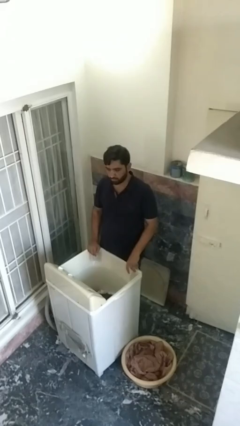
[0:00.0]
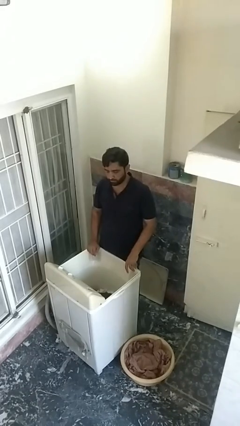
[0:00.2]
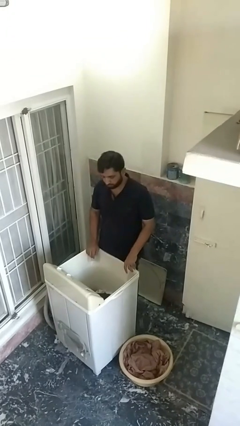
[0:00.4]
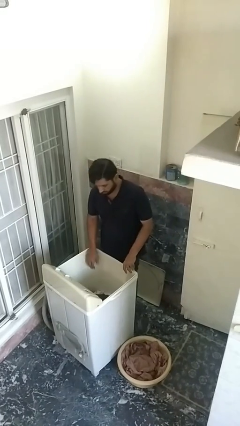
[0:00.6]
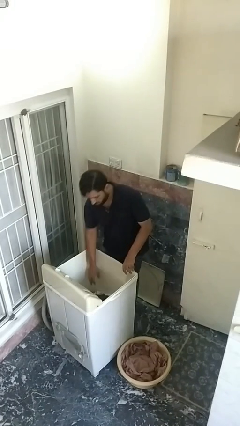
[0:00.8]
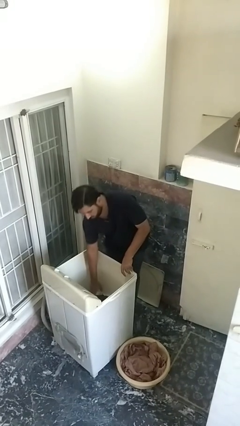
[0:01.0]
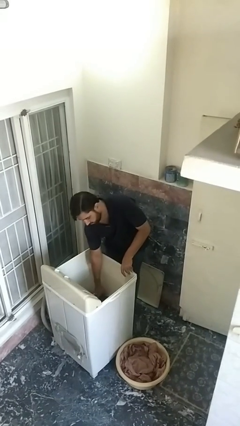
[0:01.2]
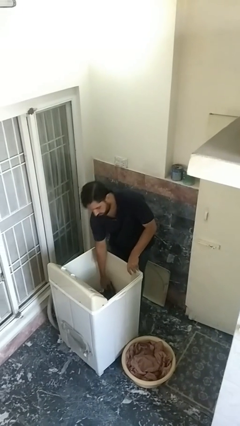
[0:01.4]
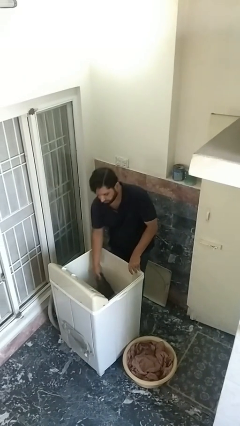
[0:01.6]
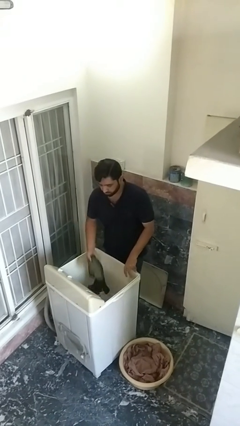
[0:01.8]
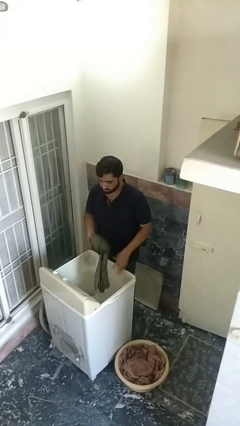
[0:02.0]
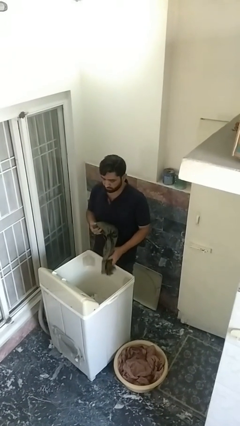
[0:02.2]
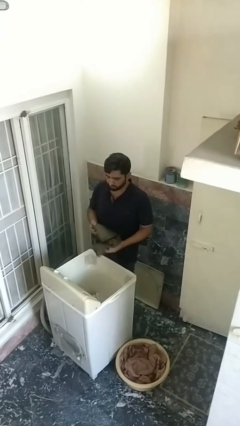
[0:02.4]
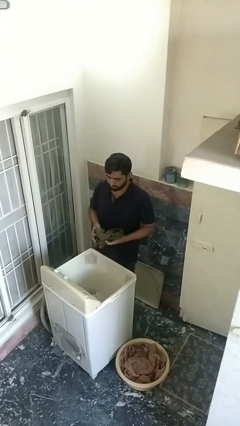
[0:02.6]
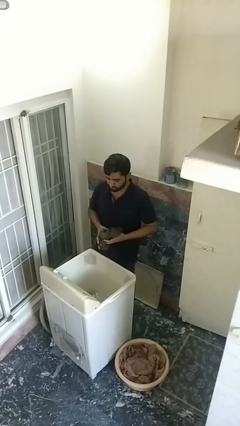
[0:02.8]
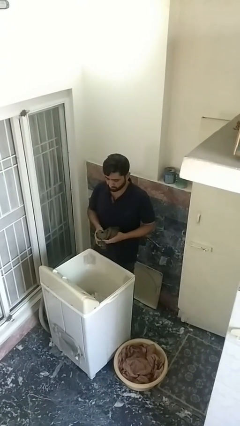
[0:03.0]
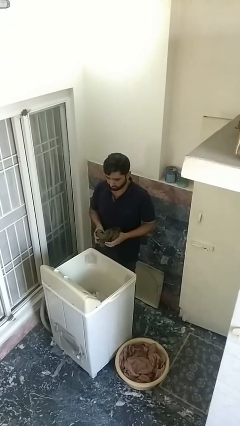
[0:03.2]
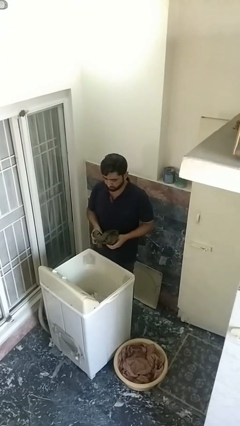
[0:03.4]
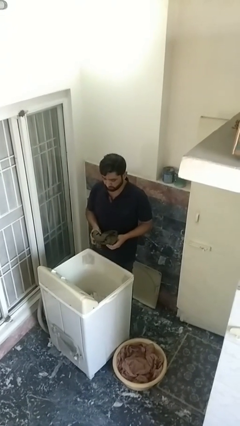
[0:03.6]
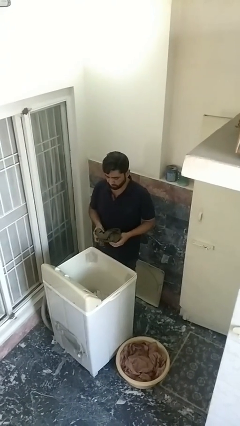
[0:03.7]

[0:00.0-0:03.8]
person unloads clotheswasher

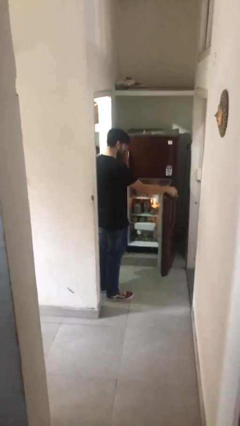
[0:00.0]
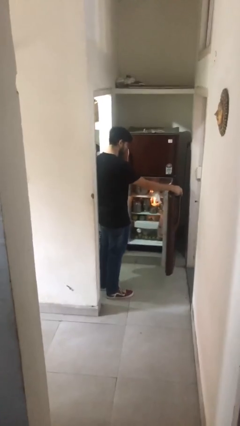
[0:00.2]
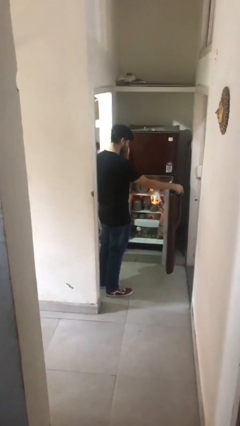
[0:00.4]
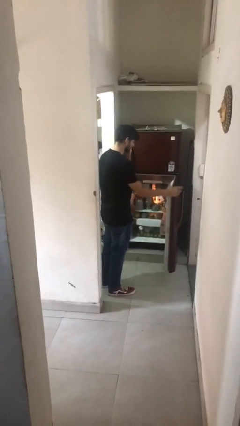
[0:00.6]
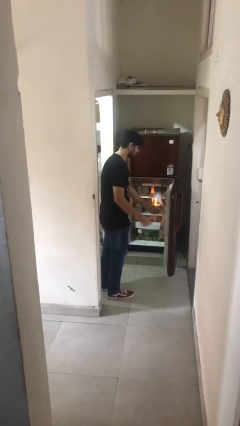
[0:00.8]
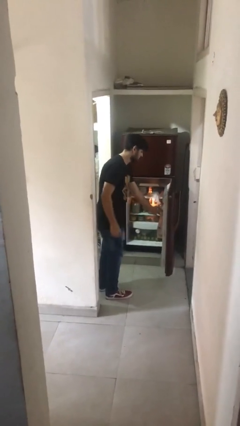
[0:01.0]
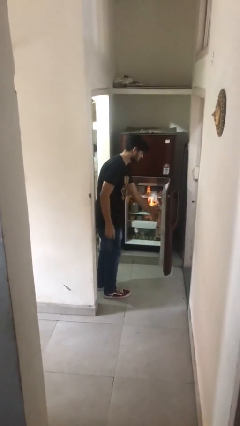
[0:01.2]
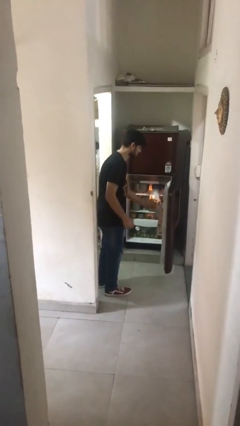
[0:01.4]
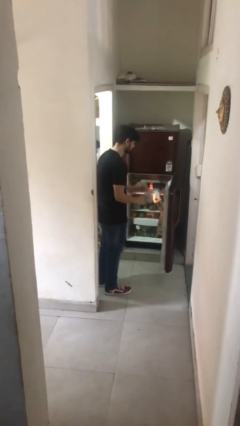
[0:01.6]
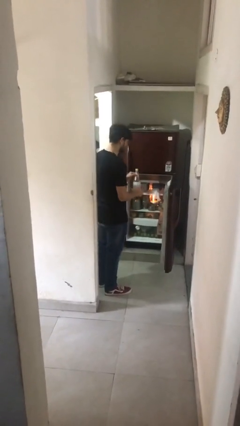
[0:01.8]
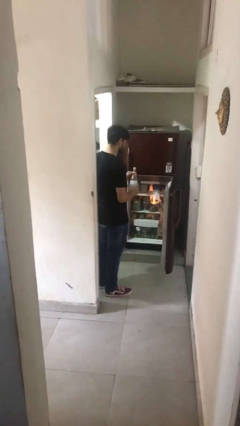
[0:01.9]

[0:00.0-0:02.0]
person takes object from refrigerator

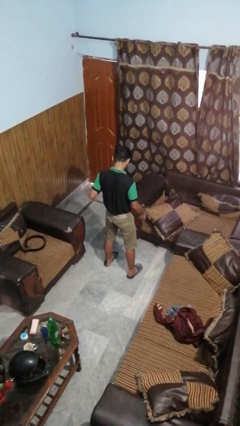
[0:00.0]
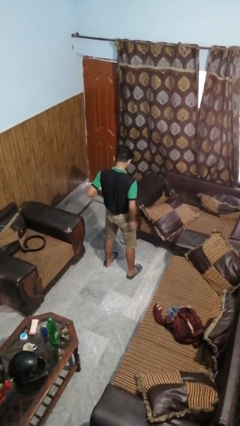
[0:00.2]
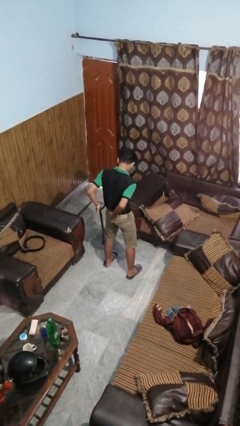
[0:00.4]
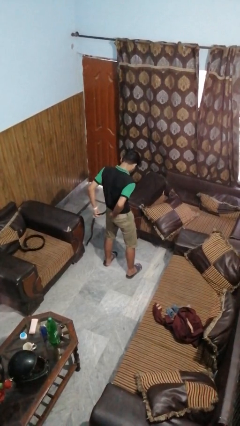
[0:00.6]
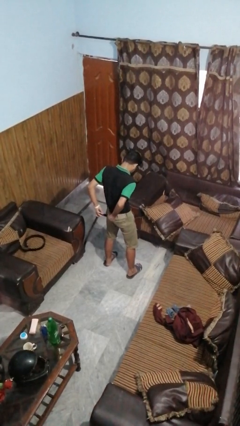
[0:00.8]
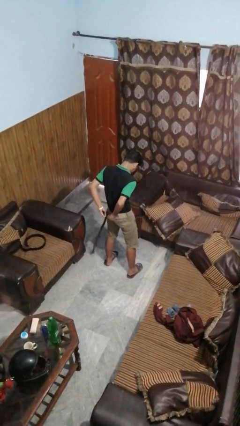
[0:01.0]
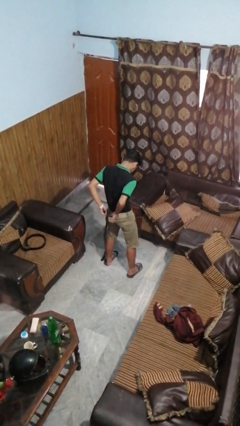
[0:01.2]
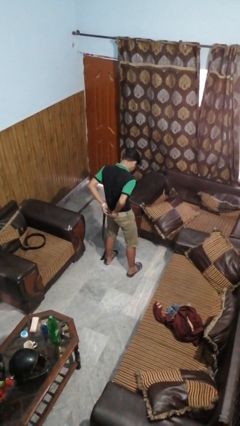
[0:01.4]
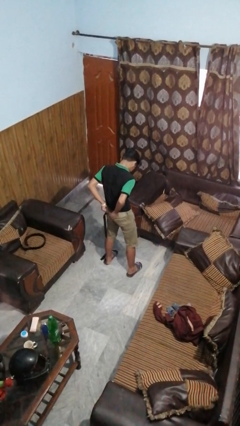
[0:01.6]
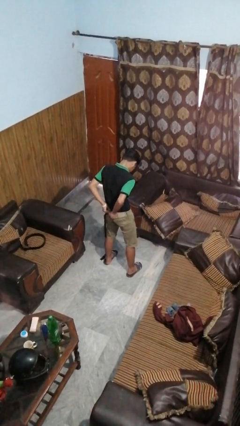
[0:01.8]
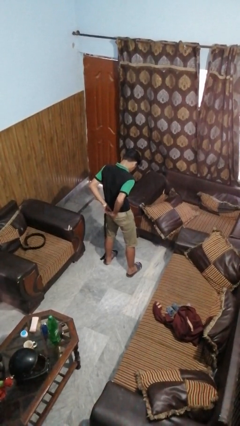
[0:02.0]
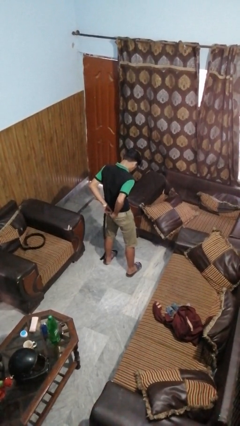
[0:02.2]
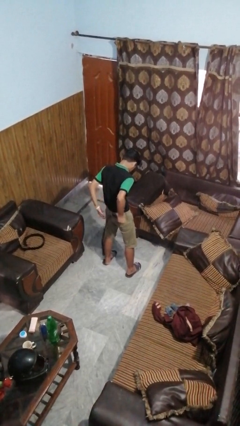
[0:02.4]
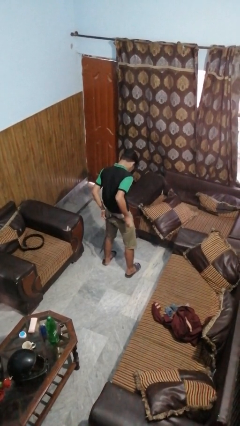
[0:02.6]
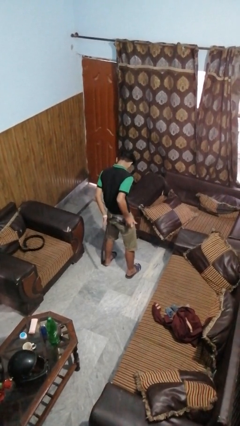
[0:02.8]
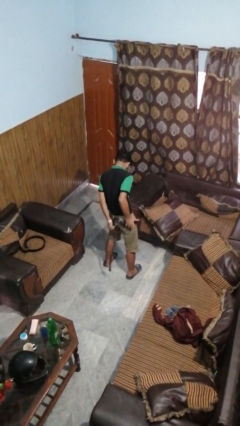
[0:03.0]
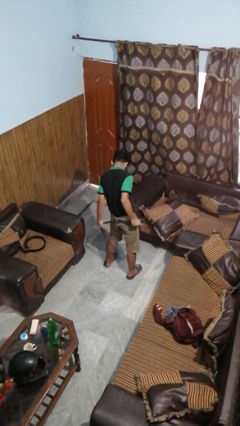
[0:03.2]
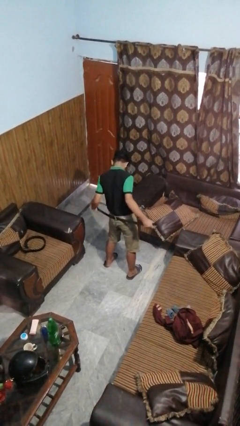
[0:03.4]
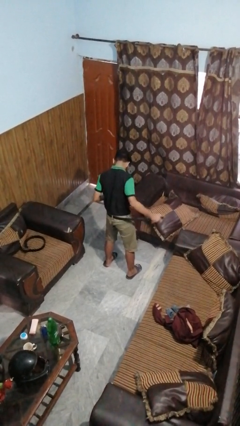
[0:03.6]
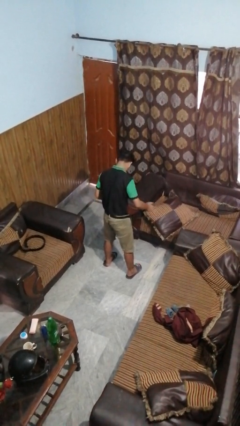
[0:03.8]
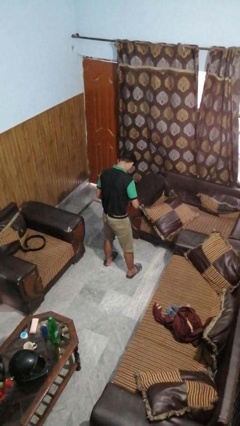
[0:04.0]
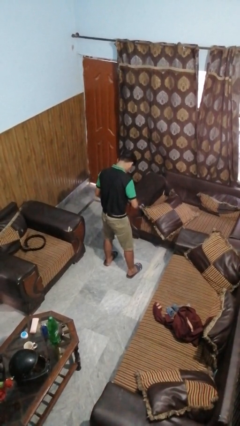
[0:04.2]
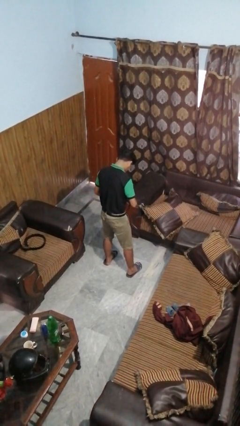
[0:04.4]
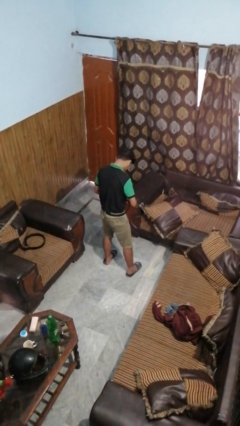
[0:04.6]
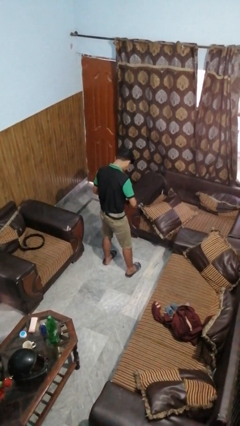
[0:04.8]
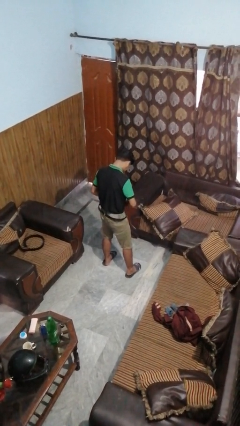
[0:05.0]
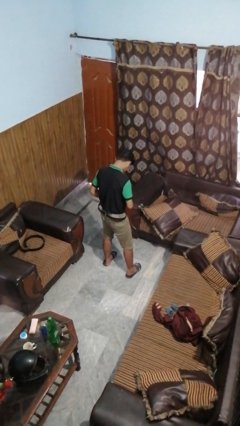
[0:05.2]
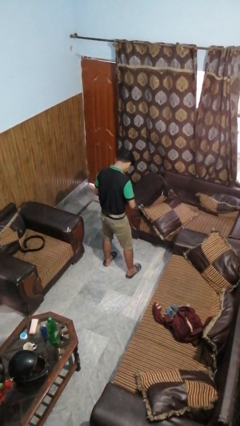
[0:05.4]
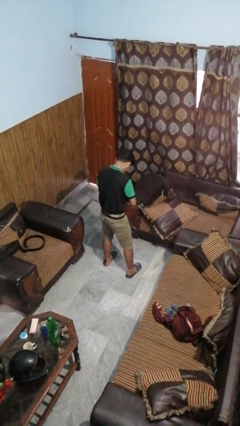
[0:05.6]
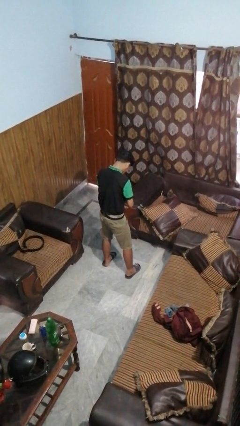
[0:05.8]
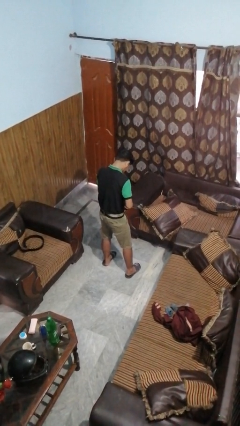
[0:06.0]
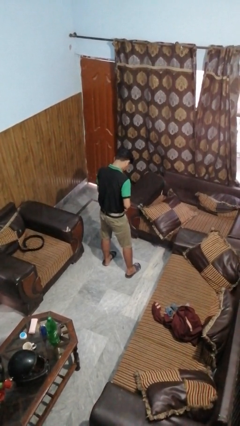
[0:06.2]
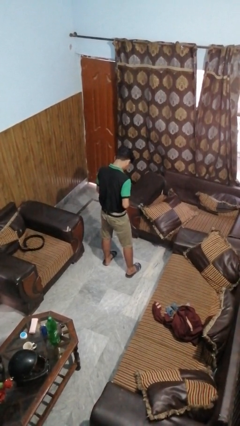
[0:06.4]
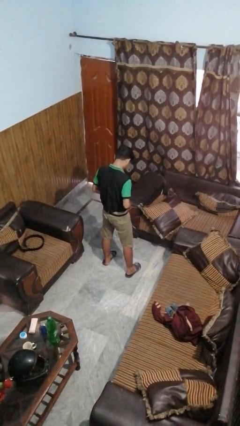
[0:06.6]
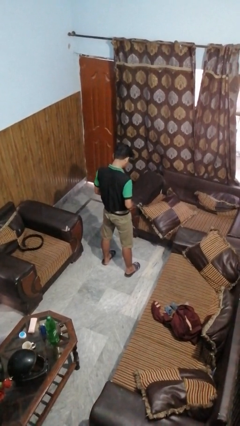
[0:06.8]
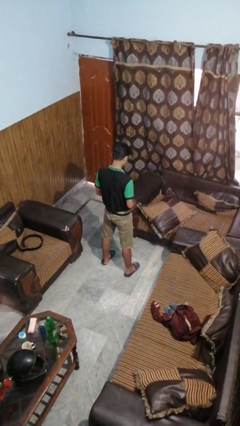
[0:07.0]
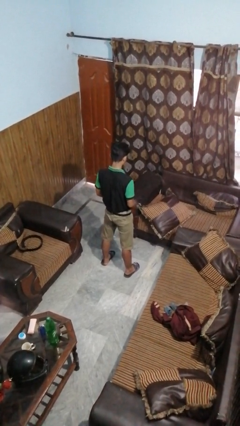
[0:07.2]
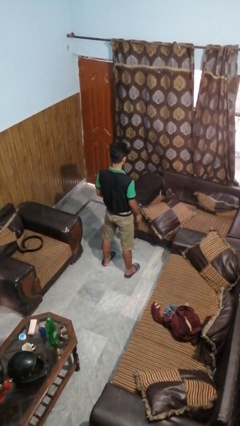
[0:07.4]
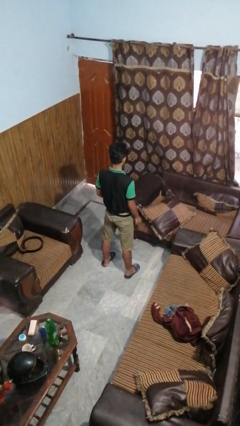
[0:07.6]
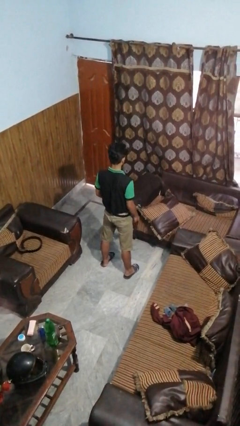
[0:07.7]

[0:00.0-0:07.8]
person puts on belt

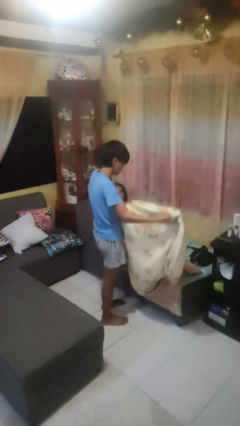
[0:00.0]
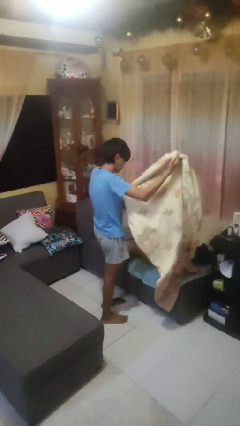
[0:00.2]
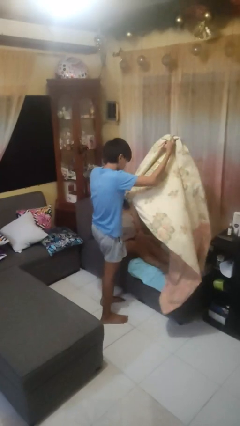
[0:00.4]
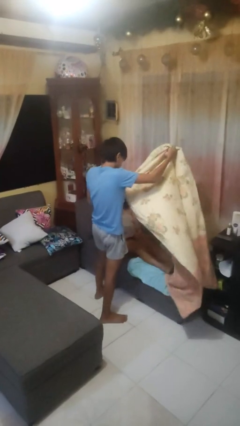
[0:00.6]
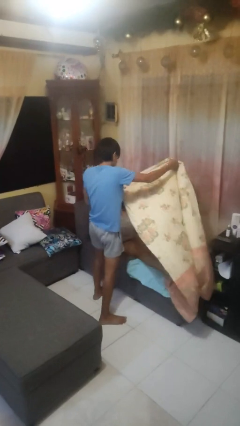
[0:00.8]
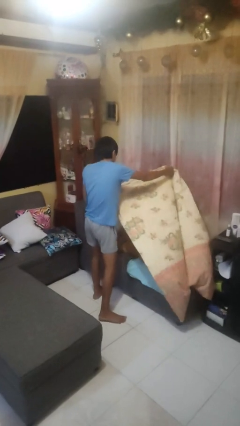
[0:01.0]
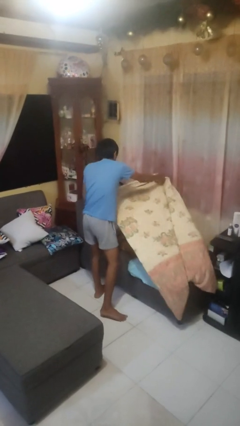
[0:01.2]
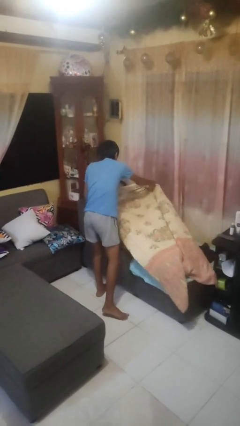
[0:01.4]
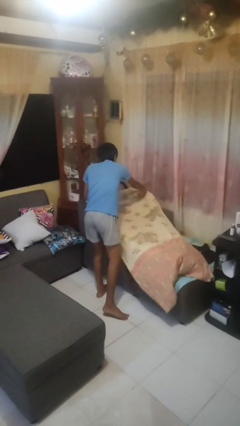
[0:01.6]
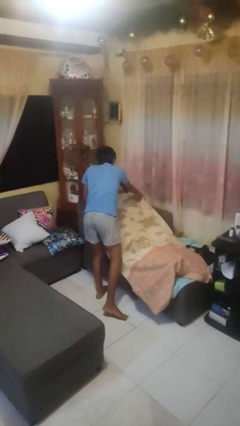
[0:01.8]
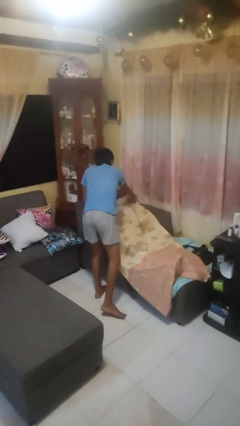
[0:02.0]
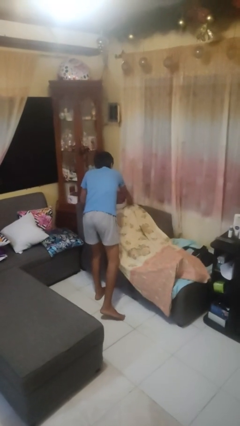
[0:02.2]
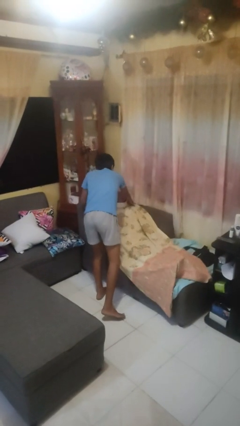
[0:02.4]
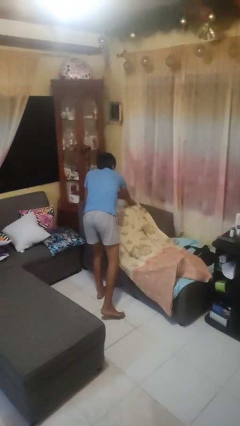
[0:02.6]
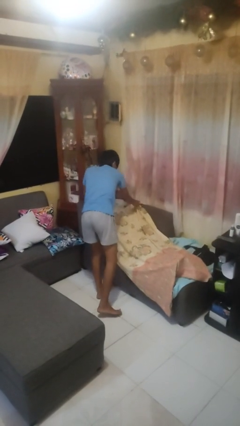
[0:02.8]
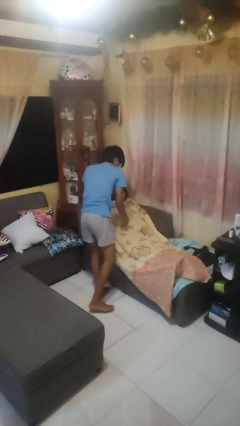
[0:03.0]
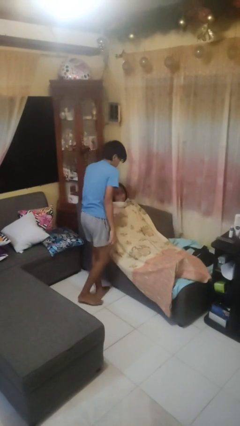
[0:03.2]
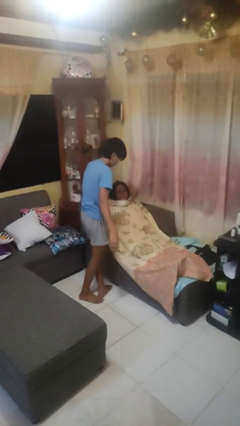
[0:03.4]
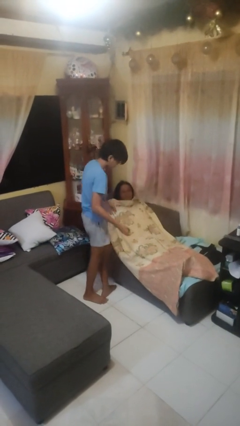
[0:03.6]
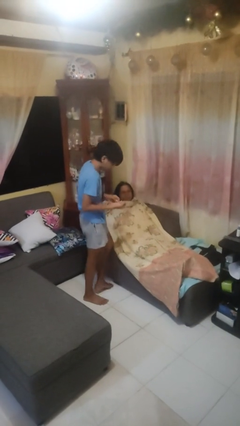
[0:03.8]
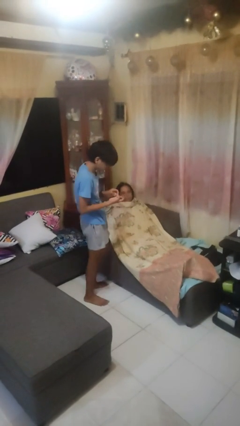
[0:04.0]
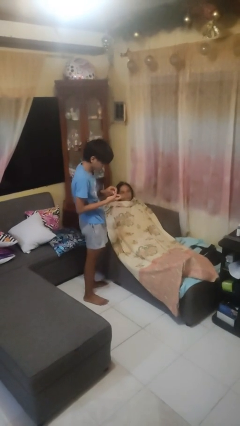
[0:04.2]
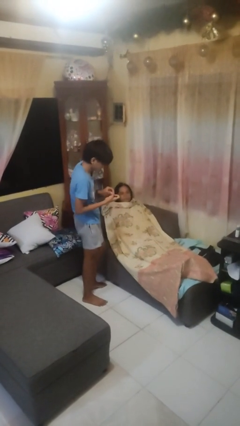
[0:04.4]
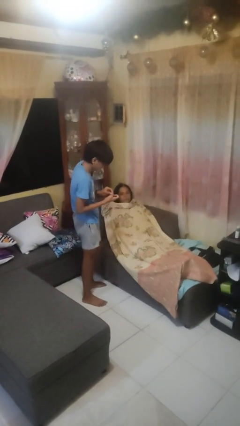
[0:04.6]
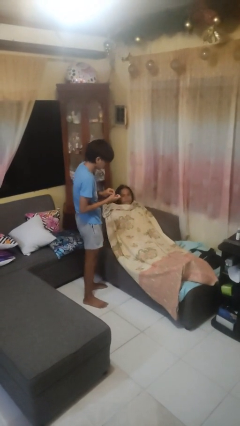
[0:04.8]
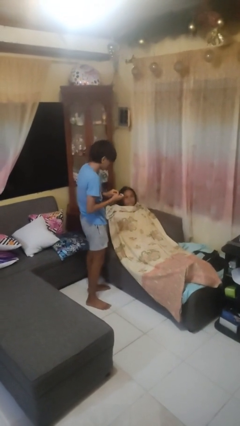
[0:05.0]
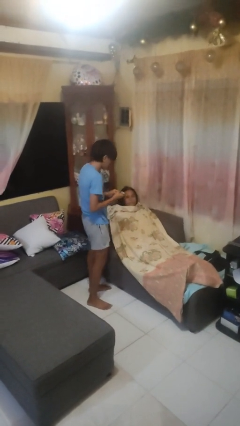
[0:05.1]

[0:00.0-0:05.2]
person covers friend with blanket
